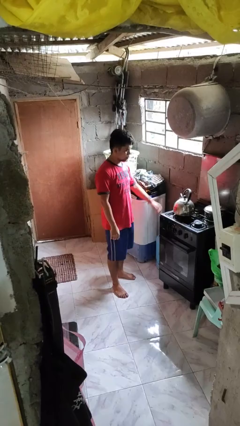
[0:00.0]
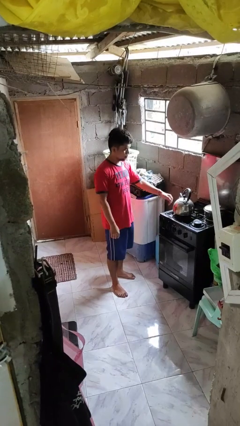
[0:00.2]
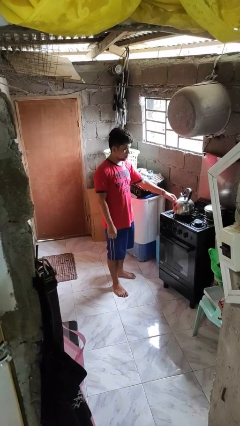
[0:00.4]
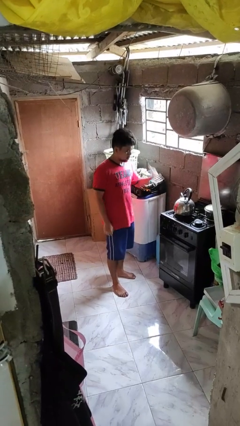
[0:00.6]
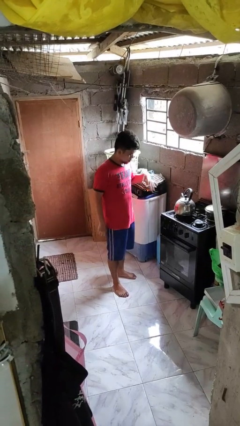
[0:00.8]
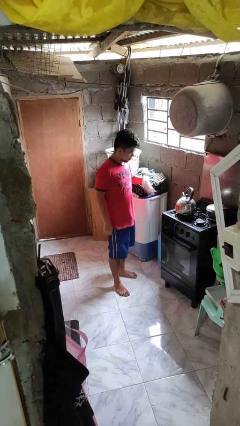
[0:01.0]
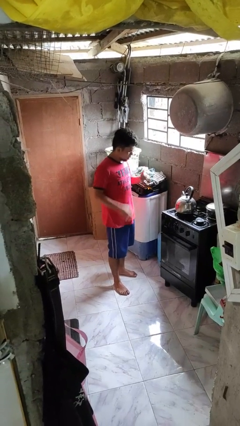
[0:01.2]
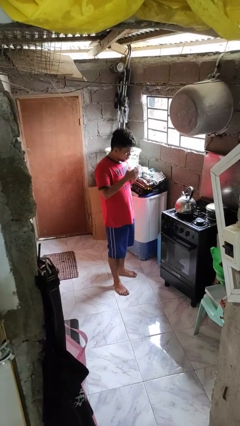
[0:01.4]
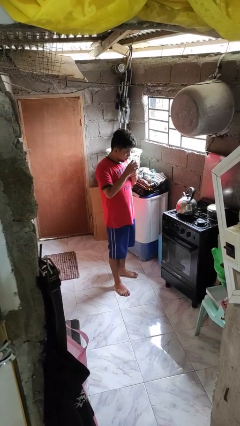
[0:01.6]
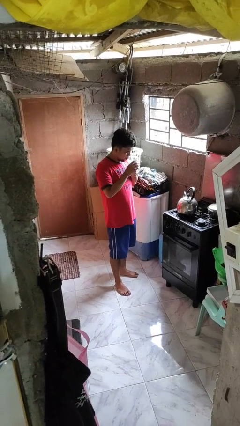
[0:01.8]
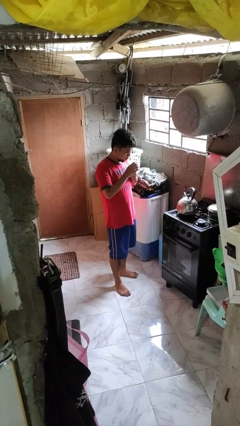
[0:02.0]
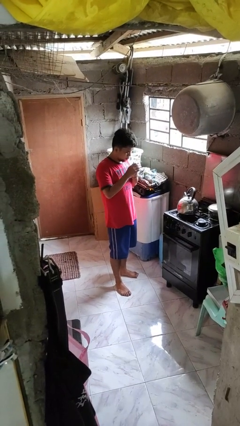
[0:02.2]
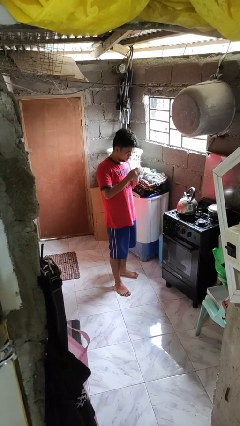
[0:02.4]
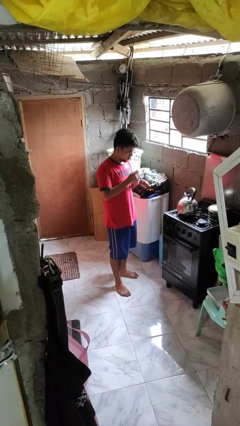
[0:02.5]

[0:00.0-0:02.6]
person burns hand

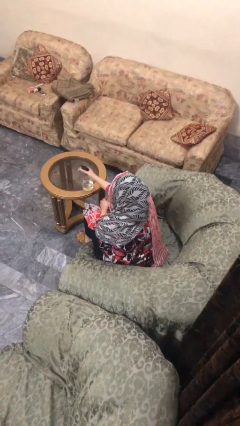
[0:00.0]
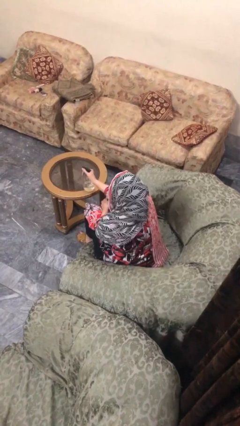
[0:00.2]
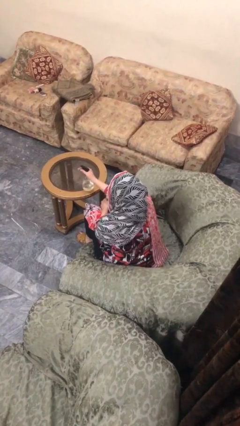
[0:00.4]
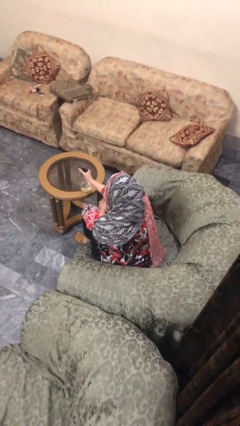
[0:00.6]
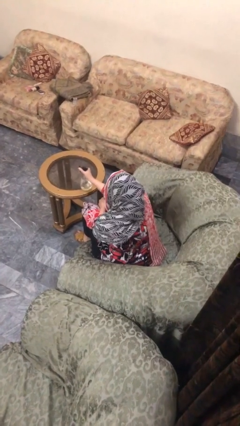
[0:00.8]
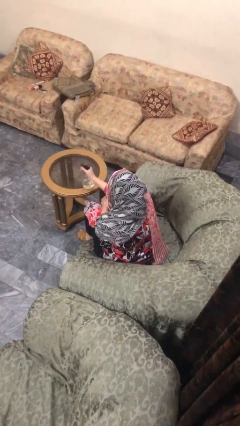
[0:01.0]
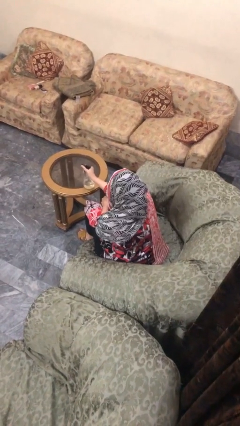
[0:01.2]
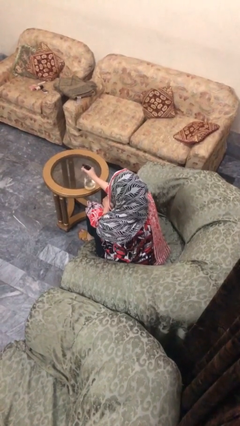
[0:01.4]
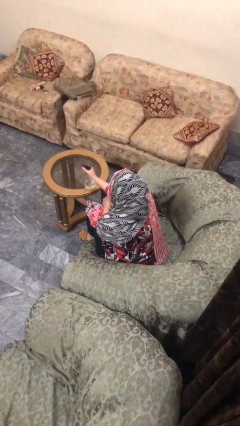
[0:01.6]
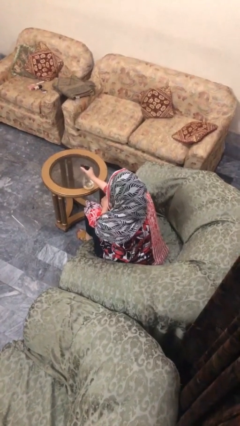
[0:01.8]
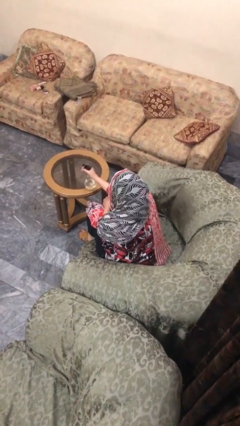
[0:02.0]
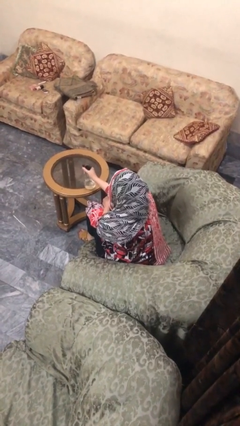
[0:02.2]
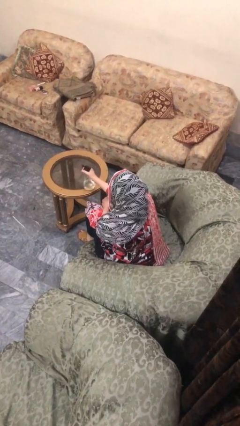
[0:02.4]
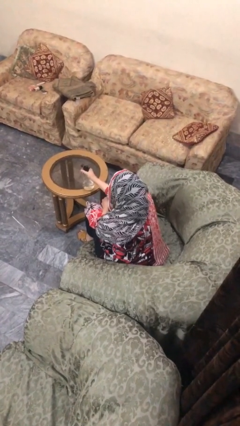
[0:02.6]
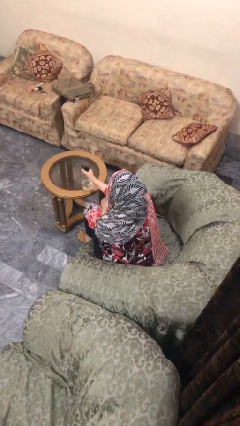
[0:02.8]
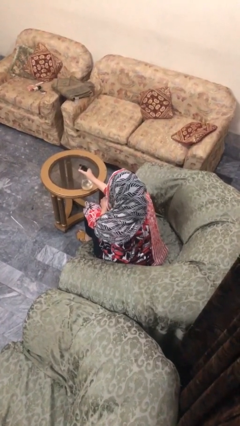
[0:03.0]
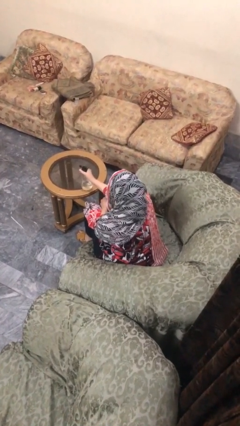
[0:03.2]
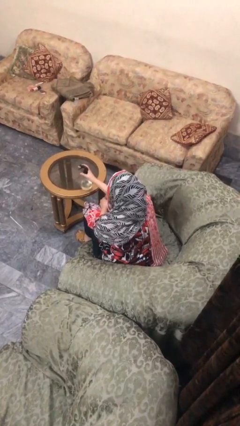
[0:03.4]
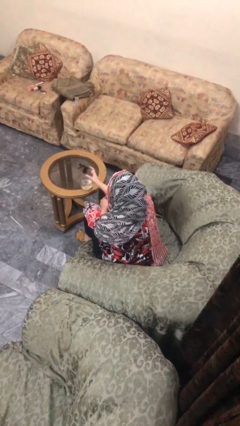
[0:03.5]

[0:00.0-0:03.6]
person sprays from bottle

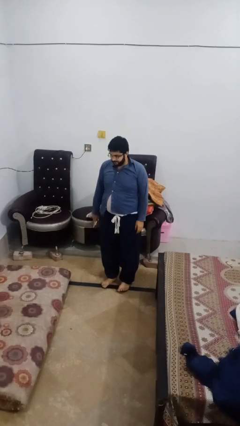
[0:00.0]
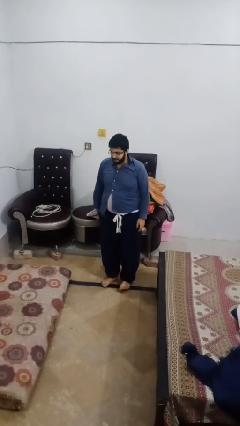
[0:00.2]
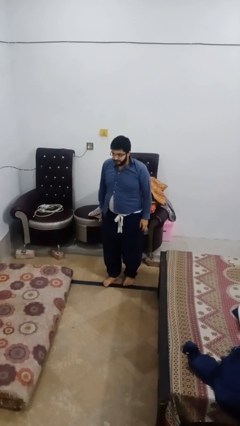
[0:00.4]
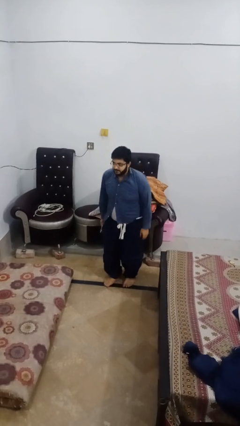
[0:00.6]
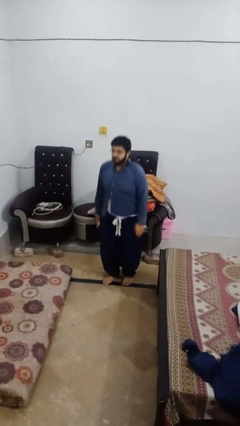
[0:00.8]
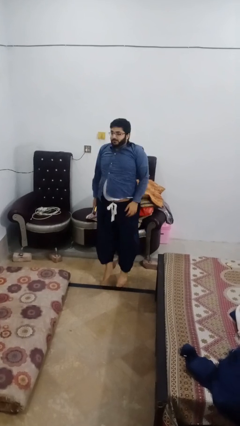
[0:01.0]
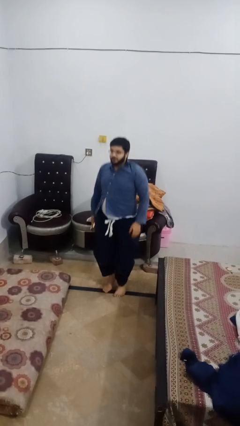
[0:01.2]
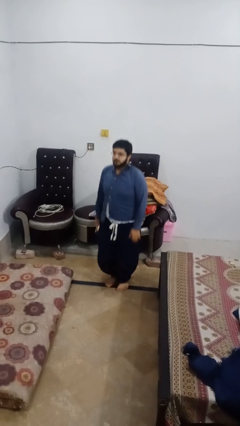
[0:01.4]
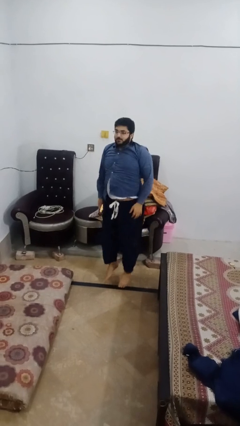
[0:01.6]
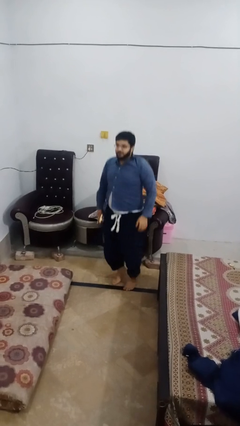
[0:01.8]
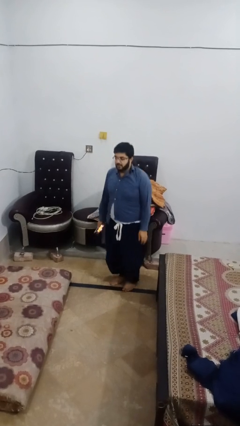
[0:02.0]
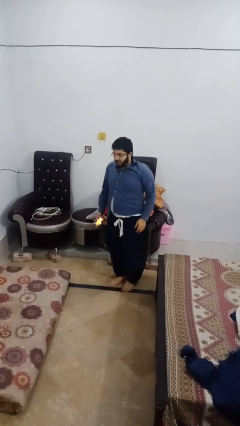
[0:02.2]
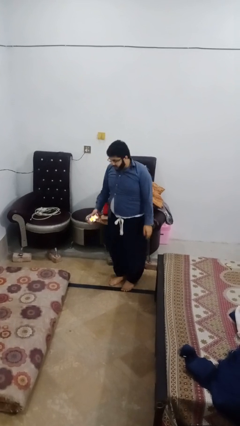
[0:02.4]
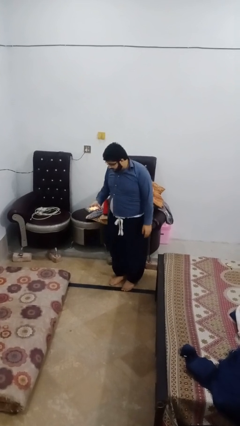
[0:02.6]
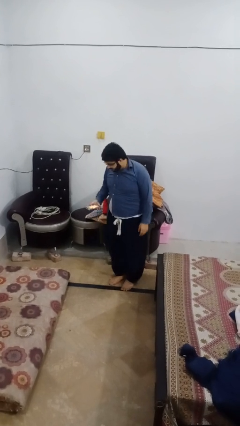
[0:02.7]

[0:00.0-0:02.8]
person jumps

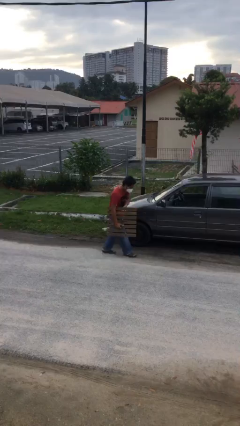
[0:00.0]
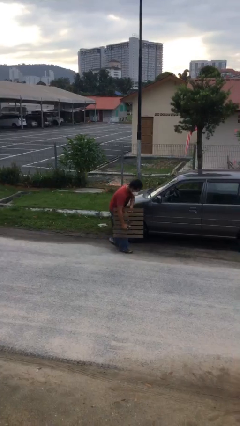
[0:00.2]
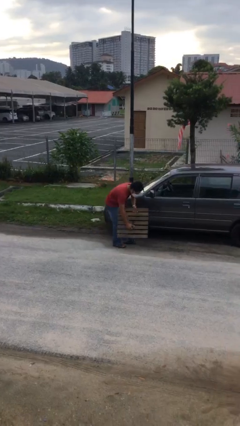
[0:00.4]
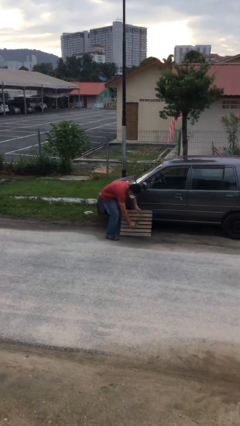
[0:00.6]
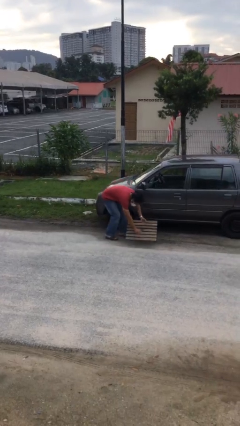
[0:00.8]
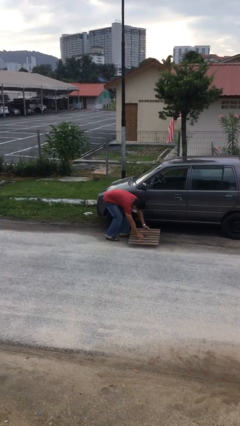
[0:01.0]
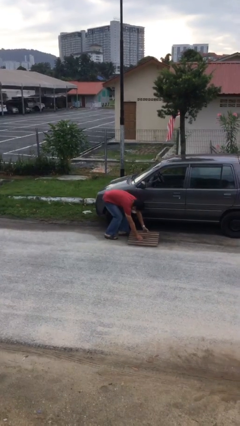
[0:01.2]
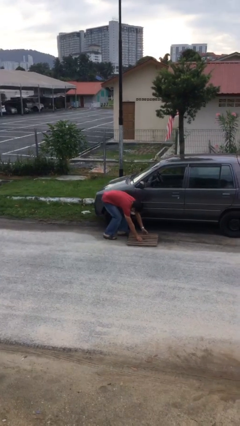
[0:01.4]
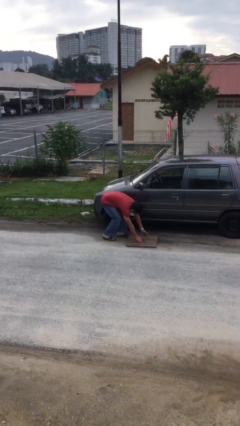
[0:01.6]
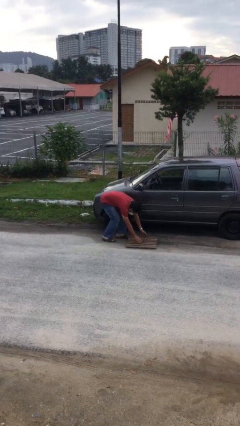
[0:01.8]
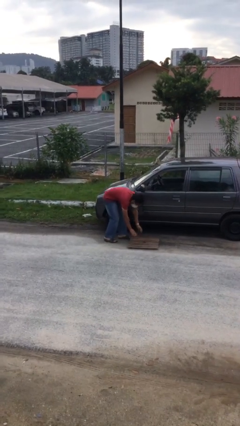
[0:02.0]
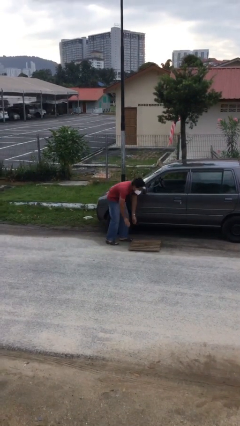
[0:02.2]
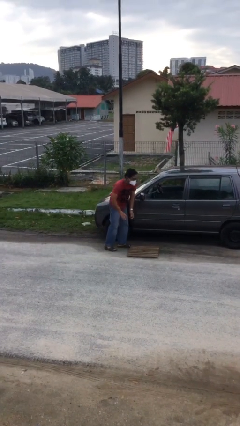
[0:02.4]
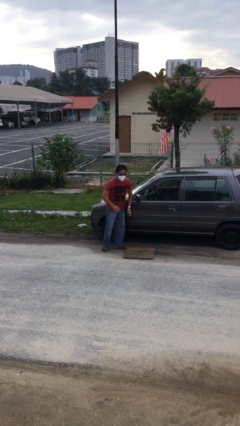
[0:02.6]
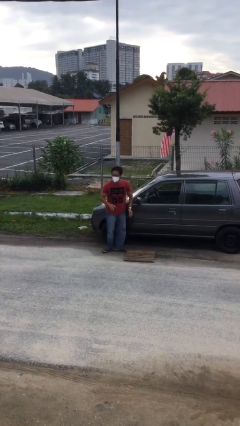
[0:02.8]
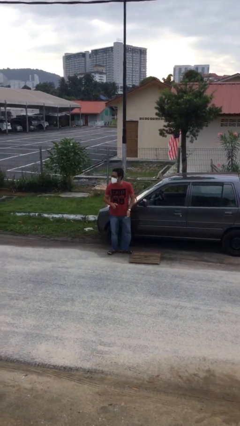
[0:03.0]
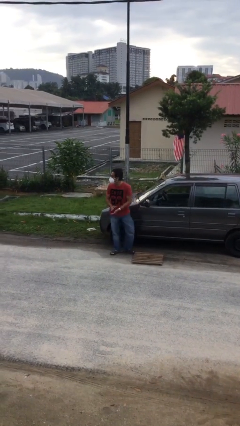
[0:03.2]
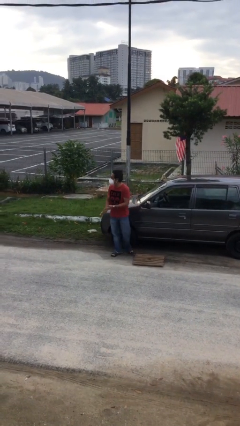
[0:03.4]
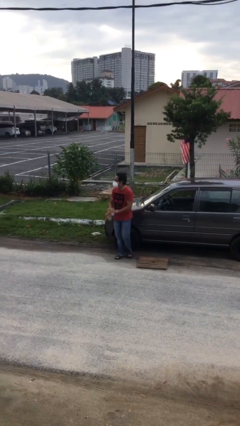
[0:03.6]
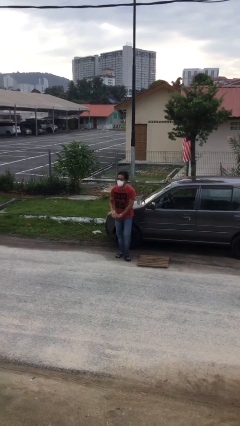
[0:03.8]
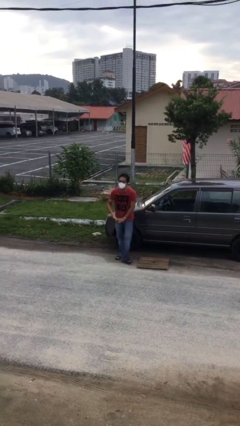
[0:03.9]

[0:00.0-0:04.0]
person puts down object on floor

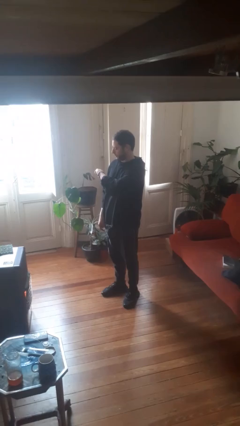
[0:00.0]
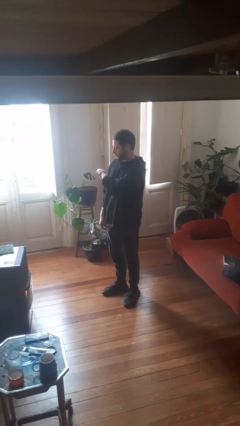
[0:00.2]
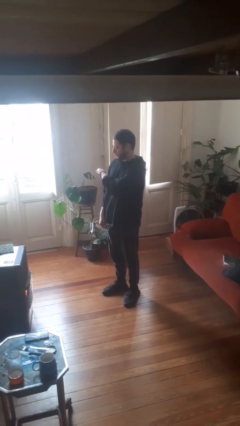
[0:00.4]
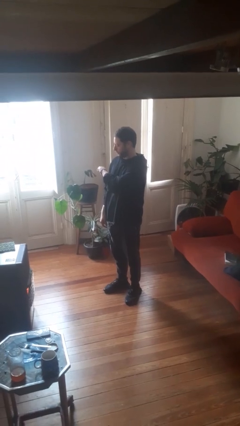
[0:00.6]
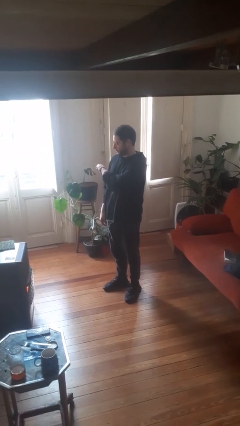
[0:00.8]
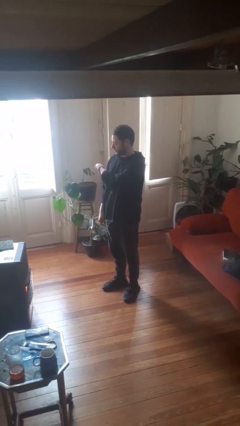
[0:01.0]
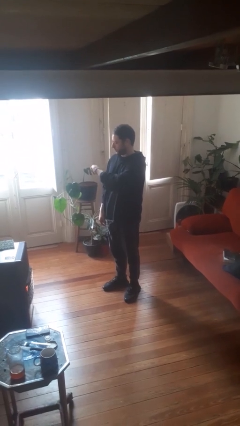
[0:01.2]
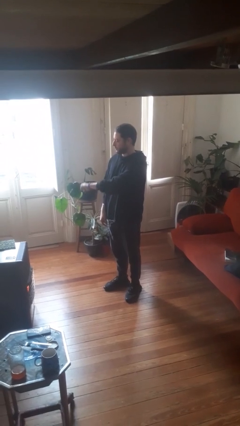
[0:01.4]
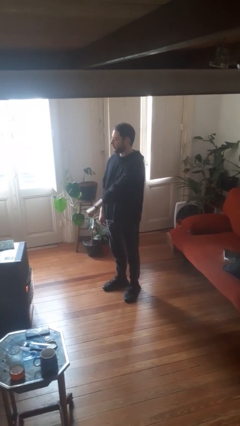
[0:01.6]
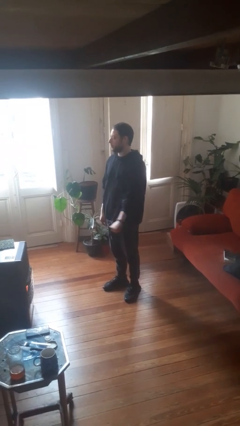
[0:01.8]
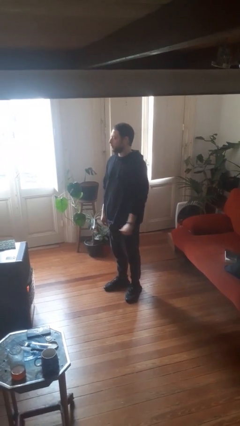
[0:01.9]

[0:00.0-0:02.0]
person looks at wristwatch

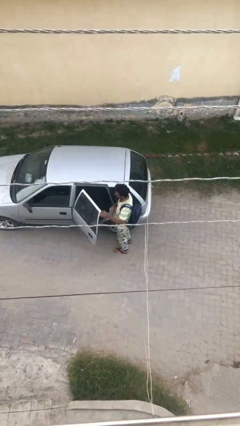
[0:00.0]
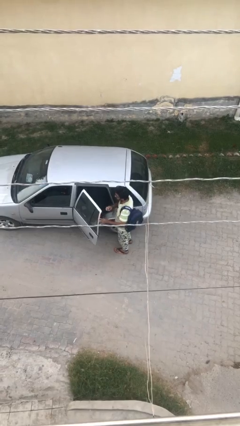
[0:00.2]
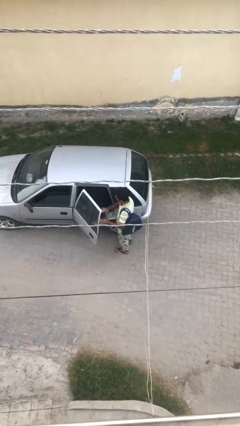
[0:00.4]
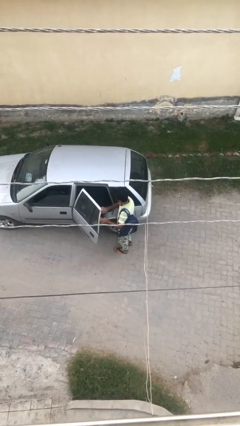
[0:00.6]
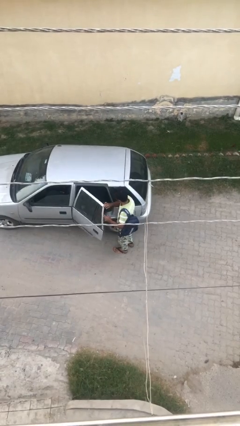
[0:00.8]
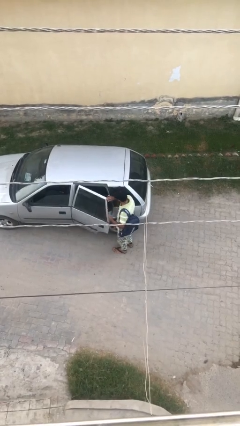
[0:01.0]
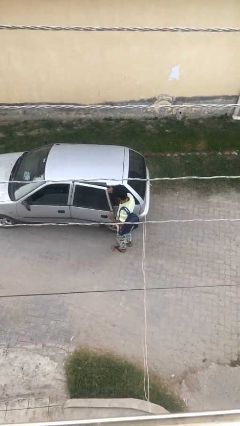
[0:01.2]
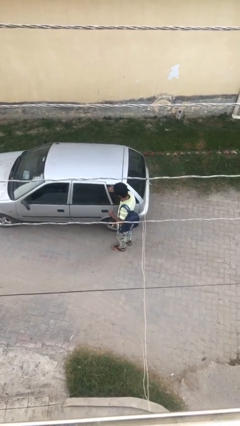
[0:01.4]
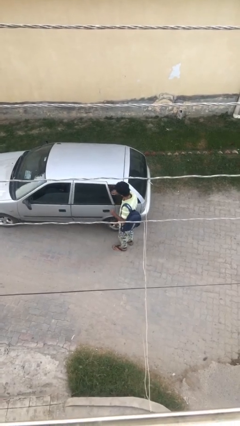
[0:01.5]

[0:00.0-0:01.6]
person closes car door

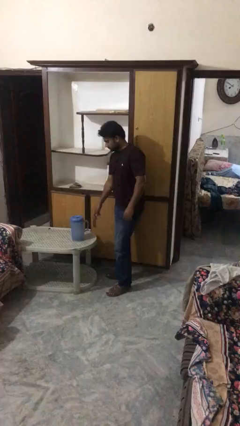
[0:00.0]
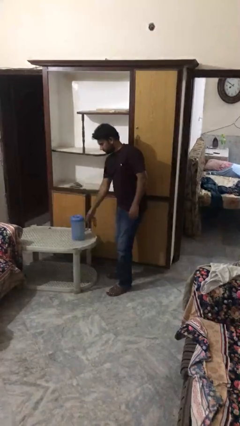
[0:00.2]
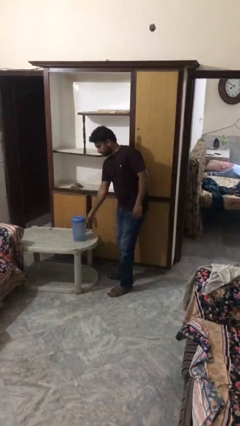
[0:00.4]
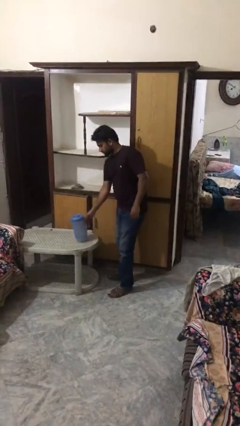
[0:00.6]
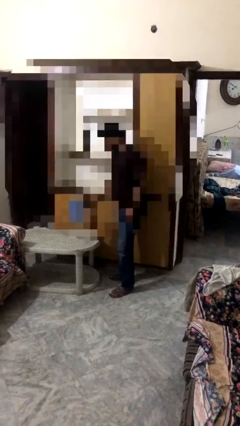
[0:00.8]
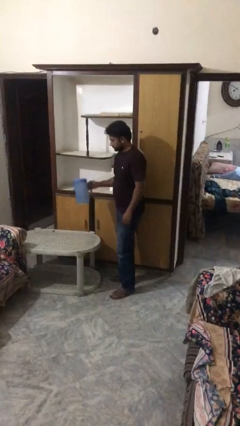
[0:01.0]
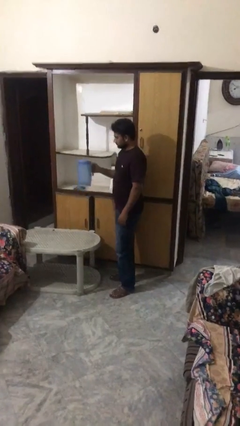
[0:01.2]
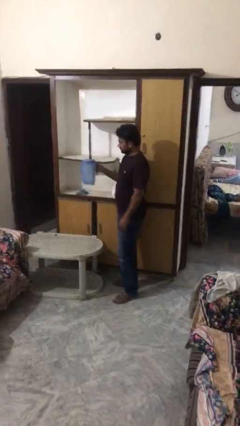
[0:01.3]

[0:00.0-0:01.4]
person picks up object from table
